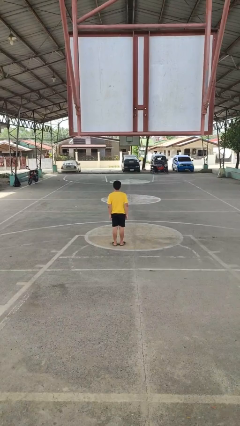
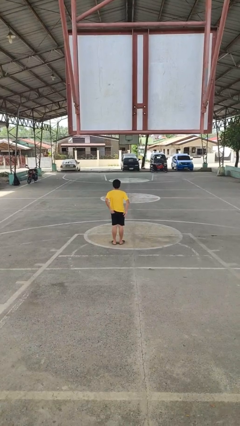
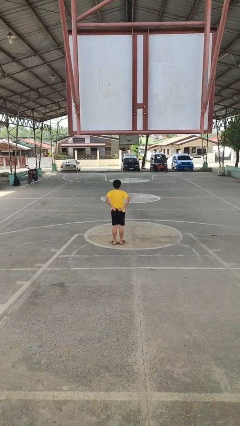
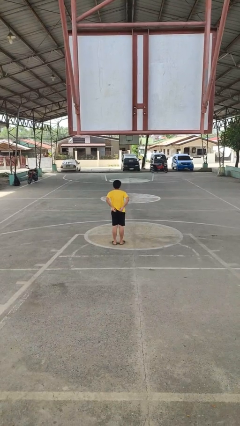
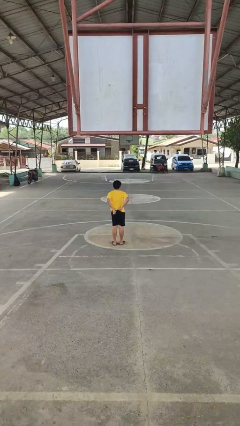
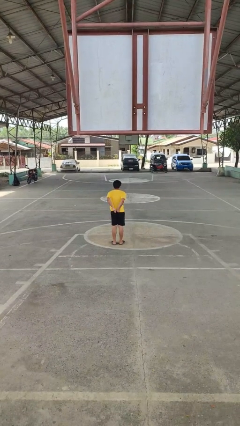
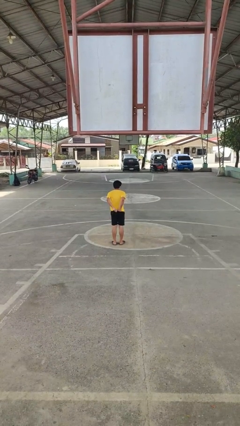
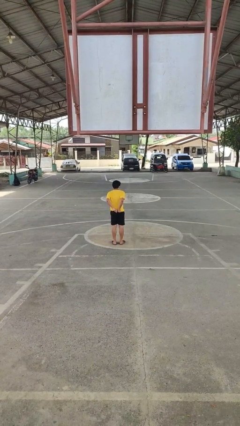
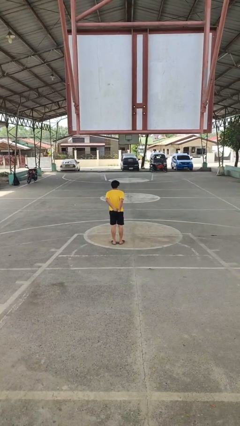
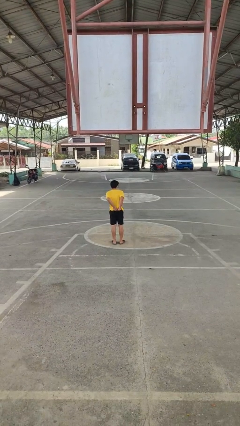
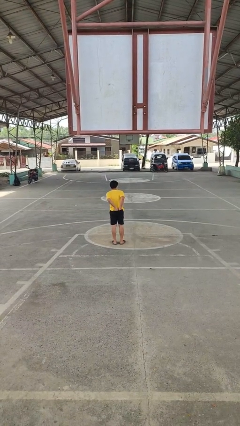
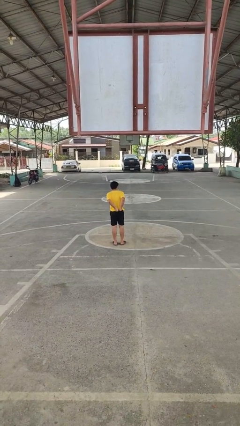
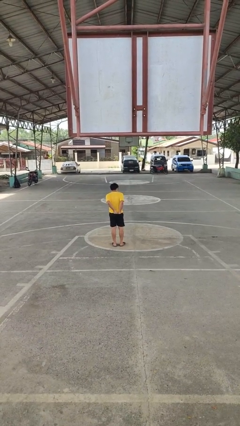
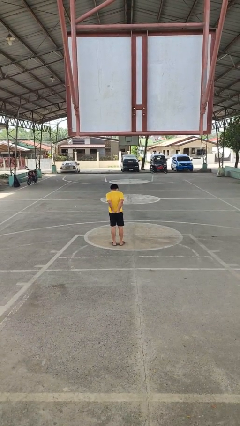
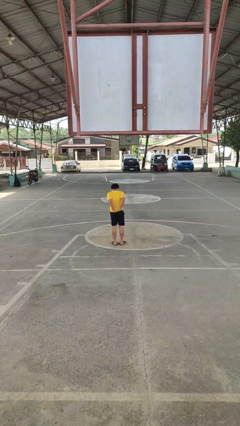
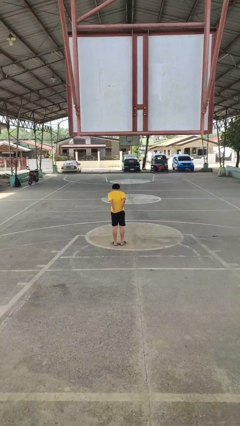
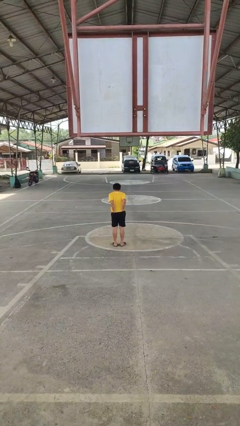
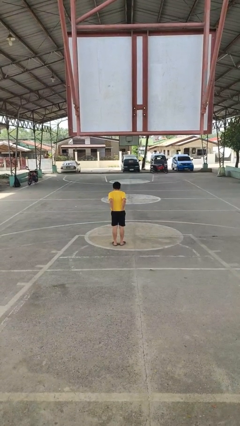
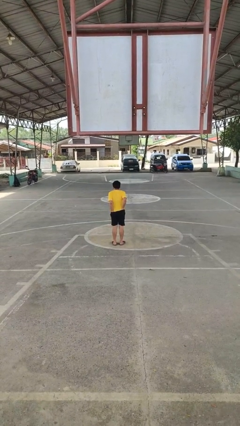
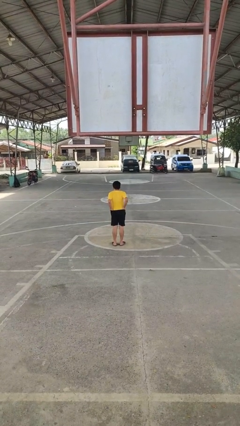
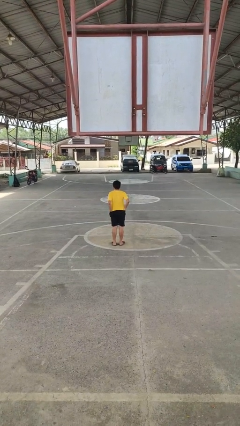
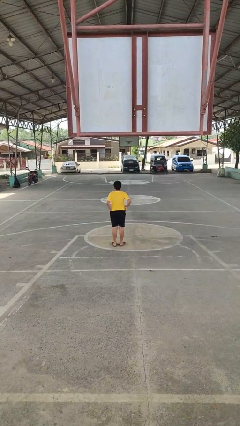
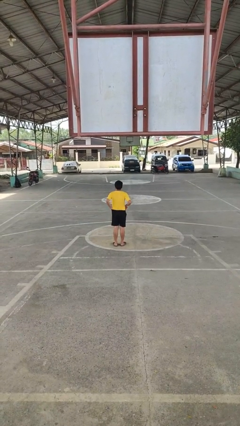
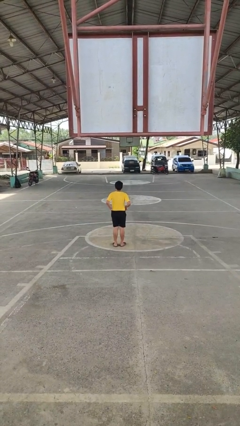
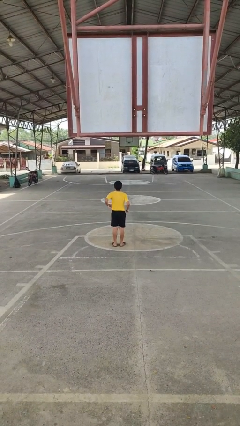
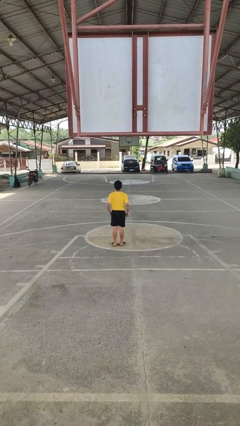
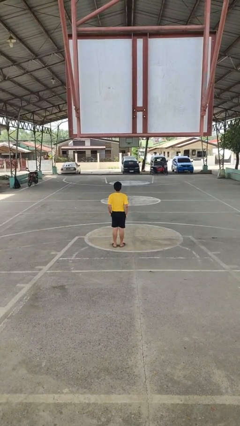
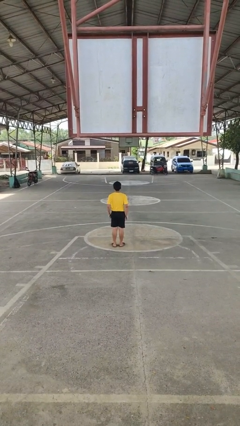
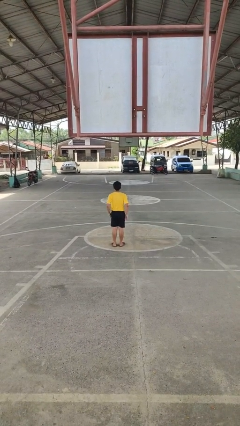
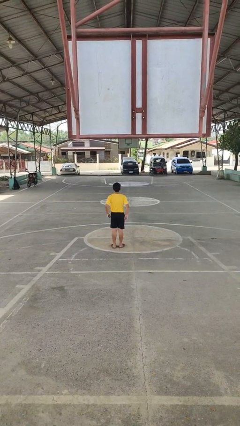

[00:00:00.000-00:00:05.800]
person tucks in shirt

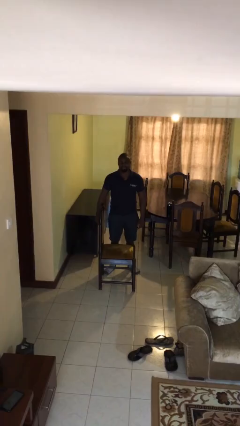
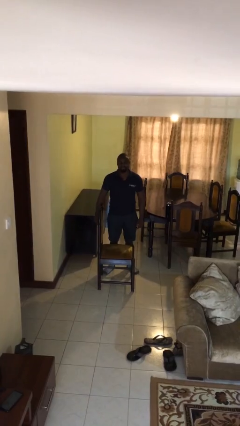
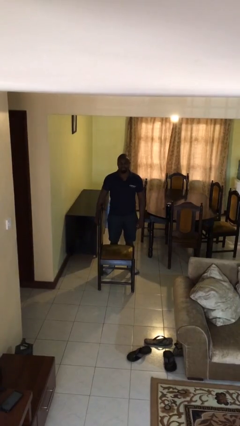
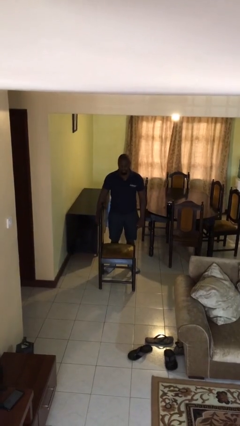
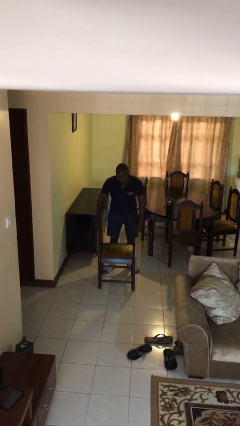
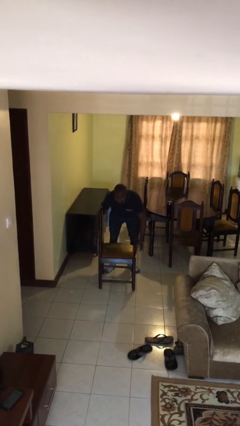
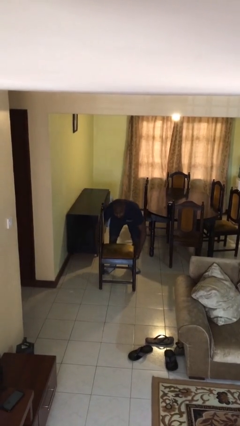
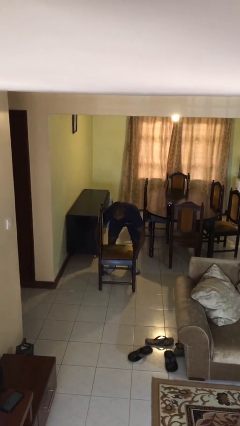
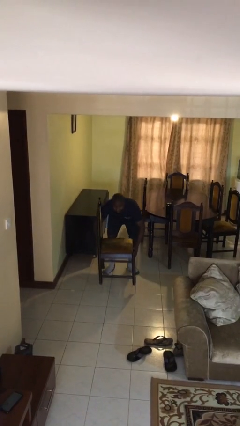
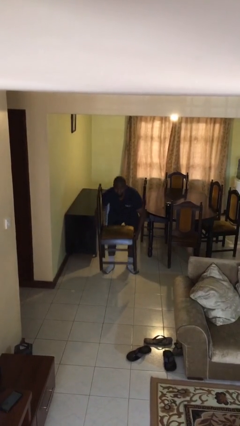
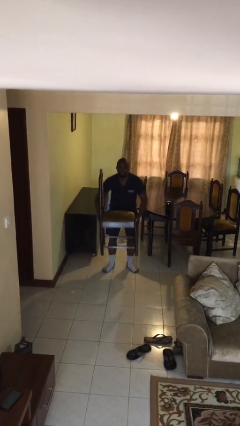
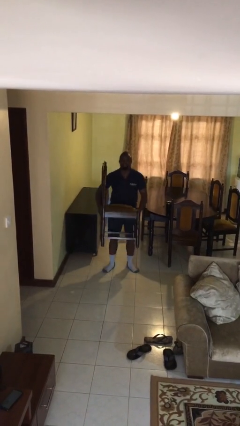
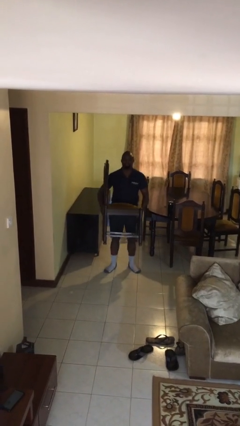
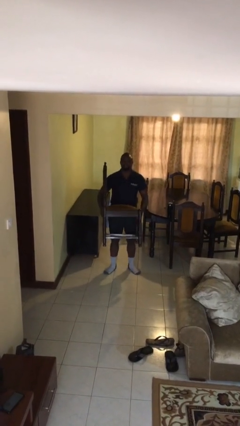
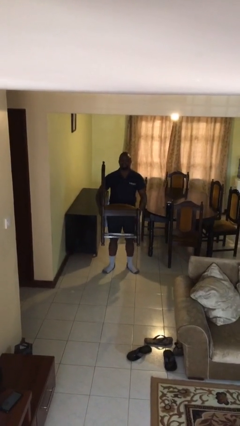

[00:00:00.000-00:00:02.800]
person picks up object from floor

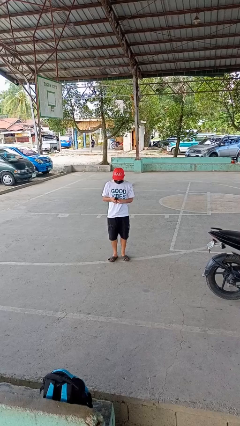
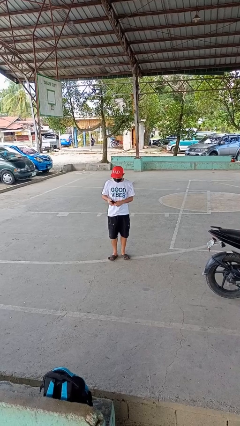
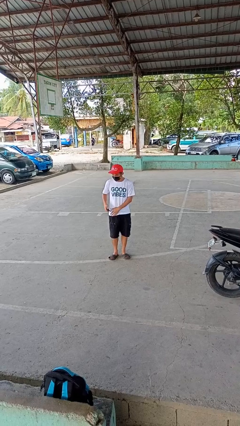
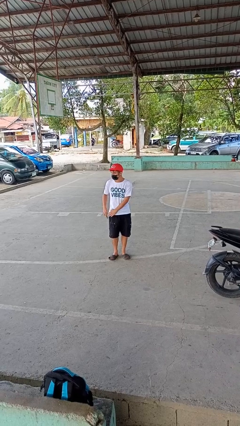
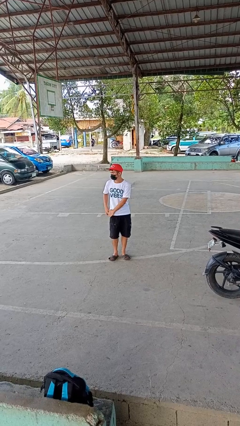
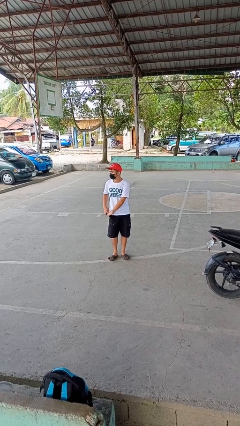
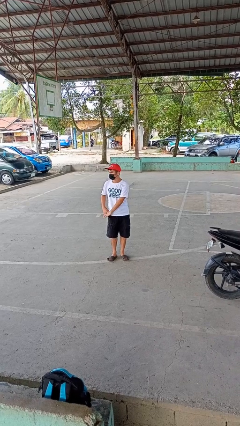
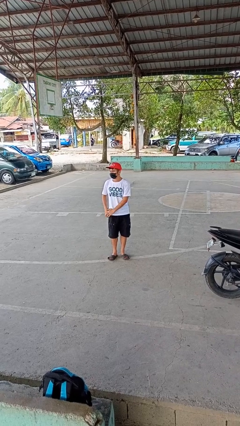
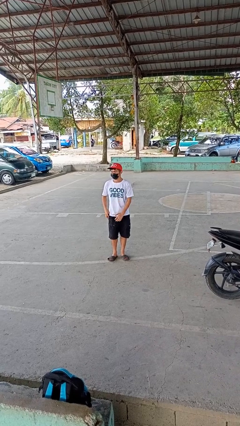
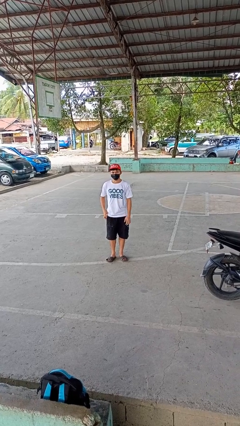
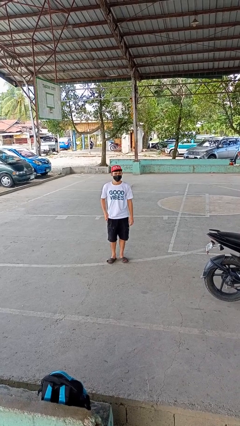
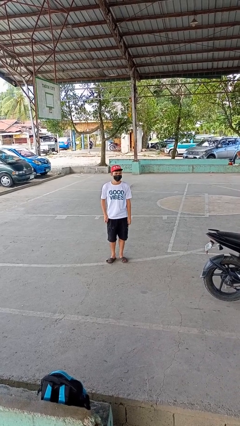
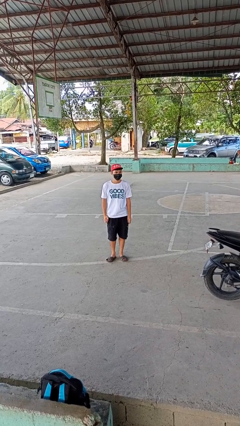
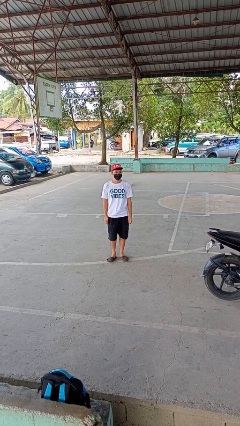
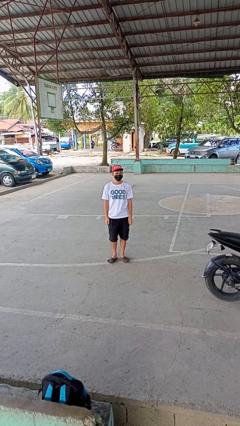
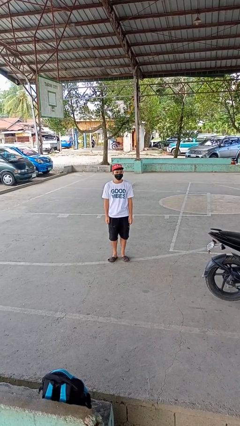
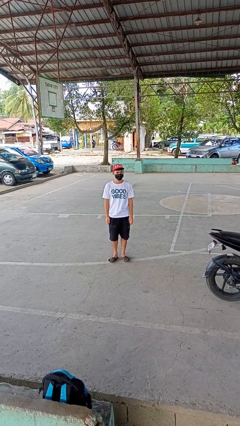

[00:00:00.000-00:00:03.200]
person puts phone into pocket

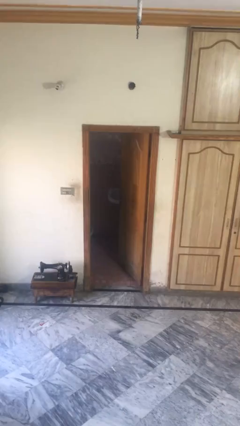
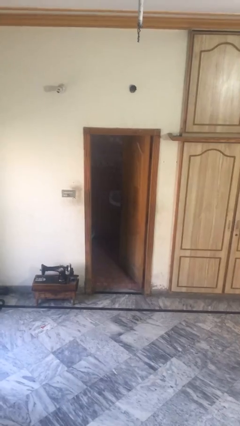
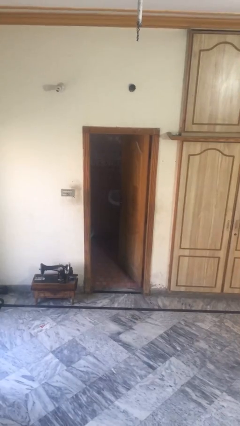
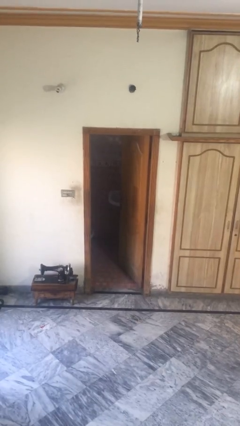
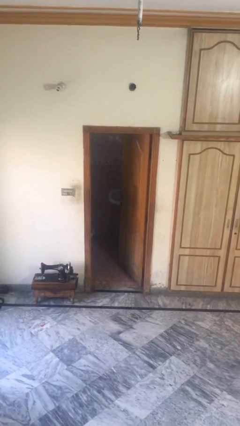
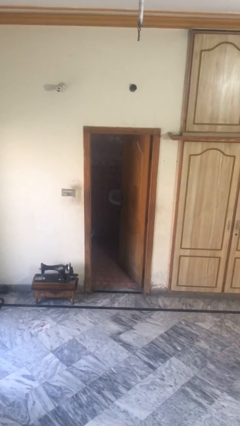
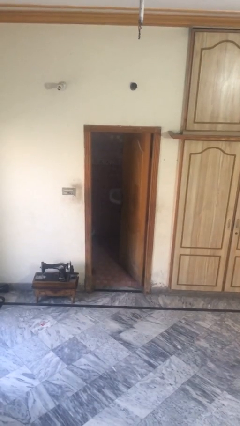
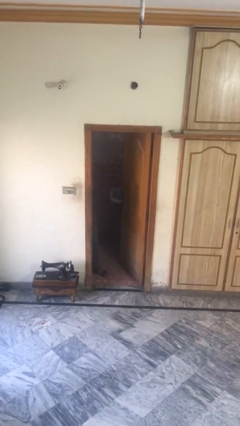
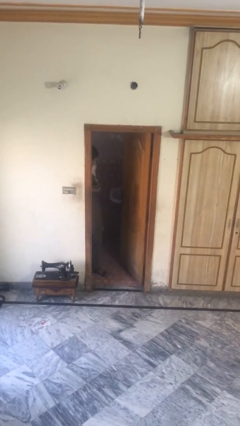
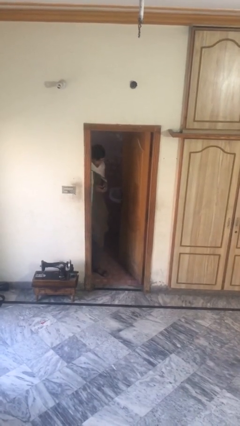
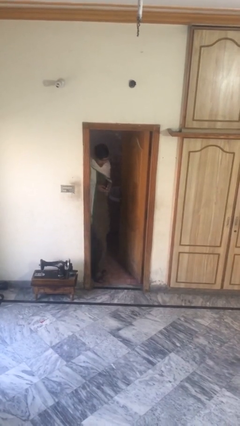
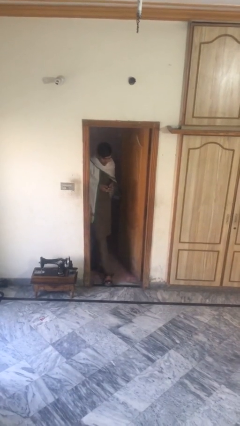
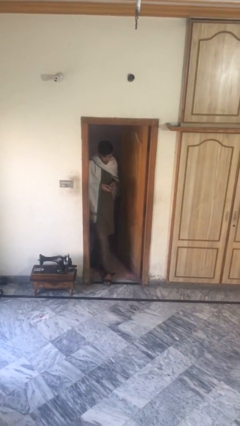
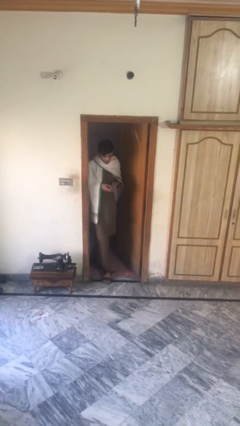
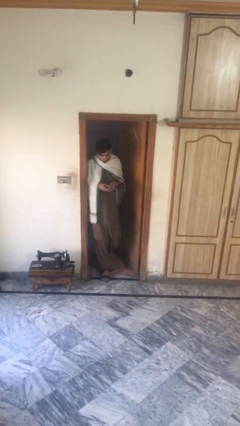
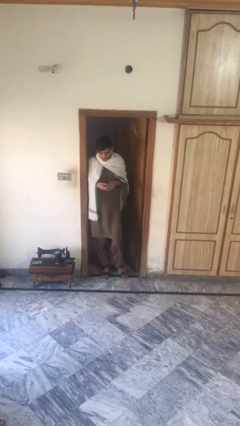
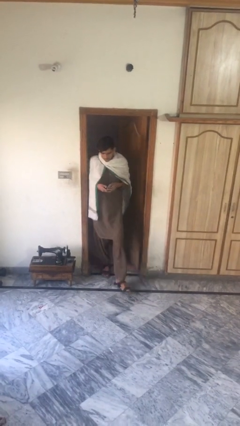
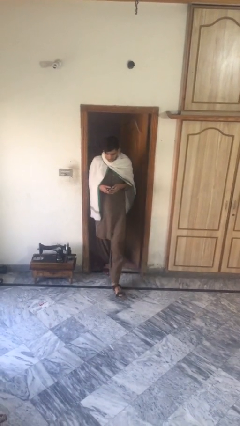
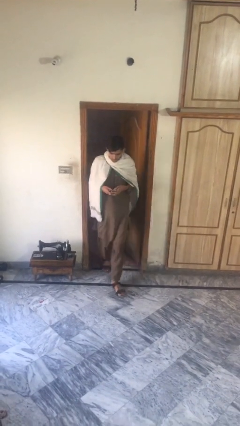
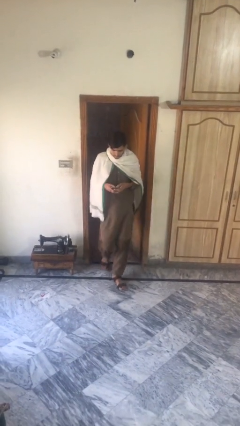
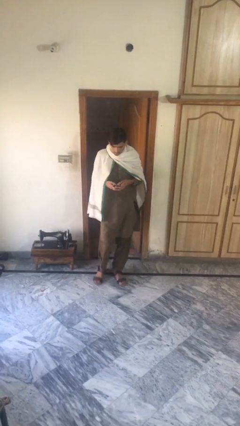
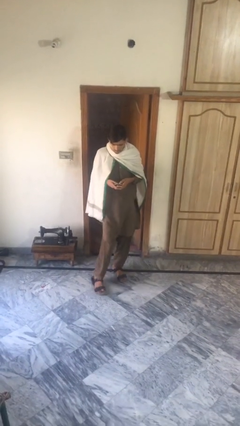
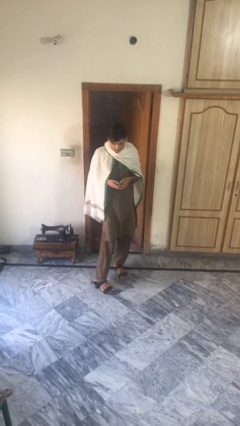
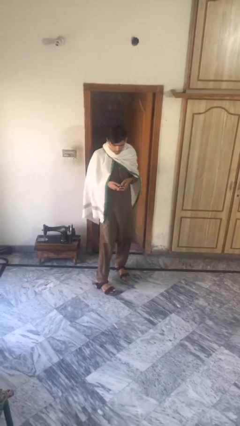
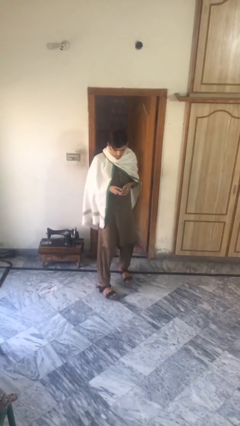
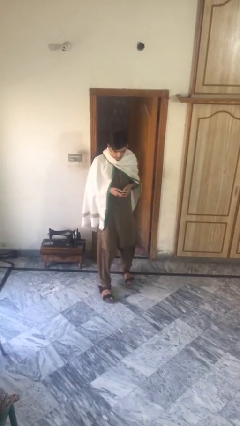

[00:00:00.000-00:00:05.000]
person enters scene through structure

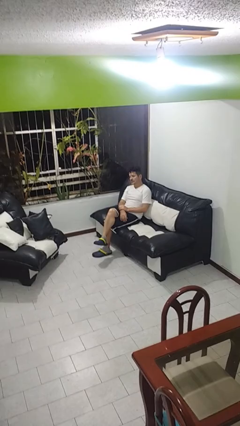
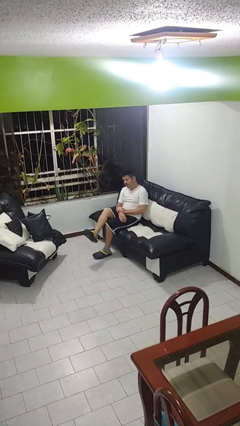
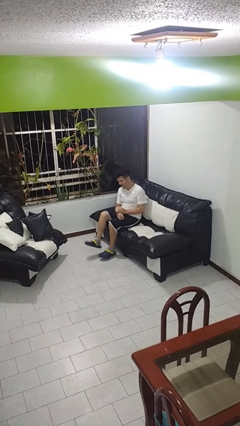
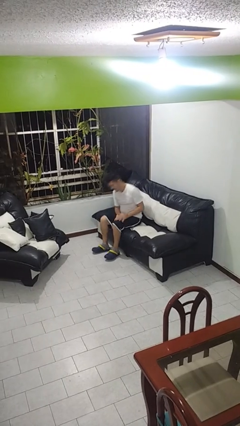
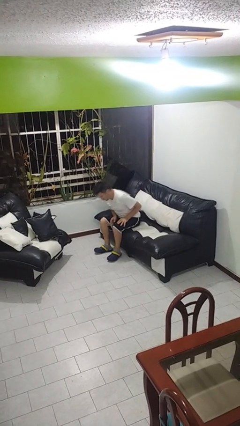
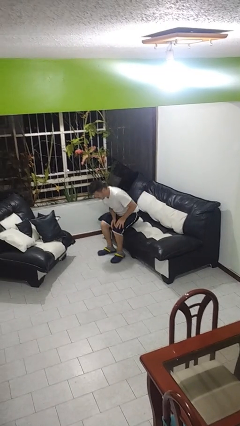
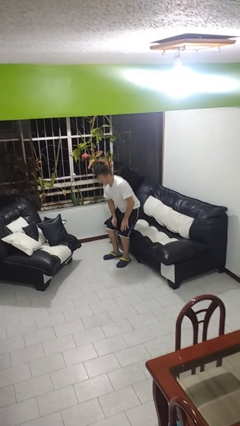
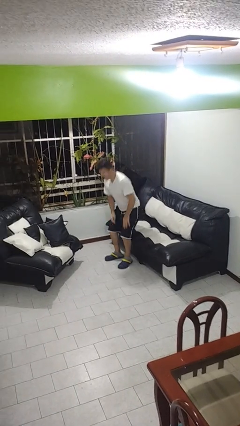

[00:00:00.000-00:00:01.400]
person stands up
